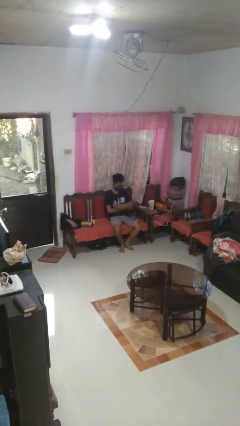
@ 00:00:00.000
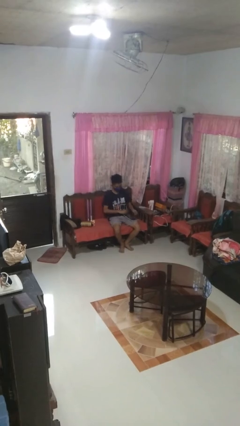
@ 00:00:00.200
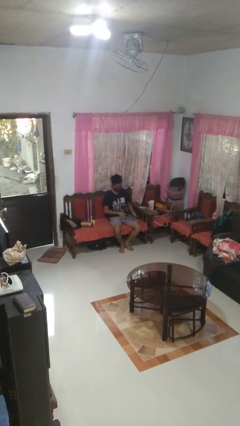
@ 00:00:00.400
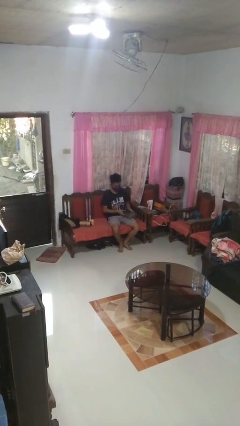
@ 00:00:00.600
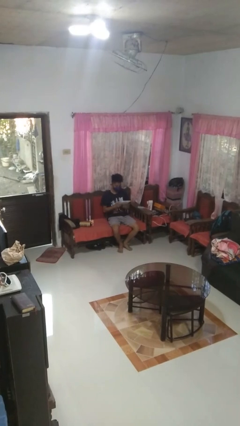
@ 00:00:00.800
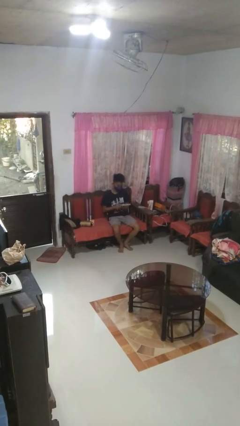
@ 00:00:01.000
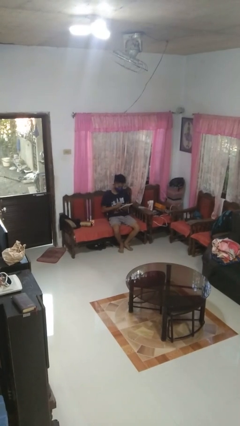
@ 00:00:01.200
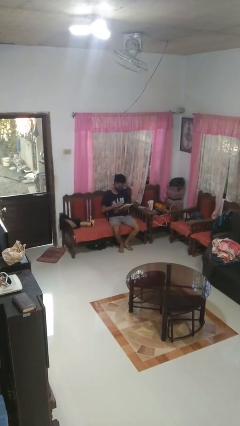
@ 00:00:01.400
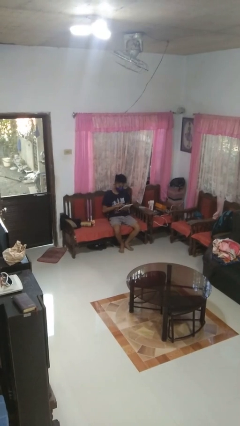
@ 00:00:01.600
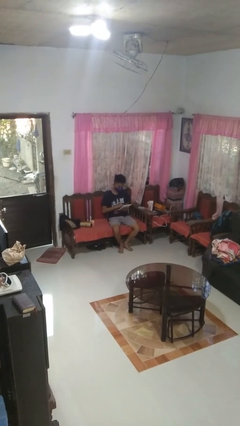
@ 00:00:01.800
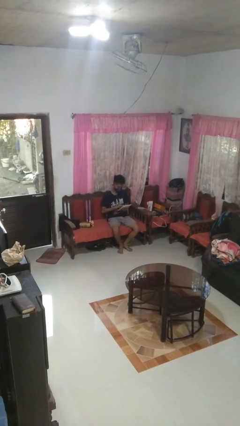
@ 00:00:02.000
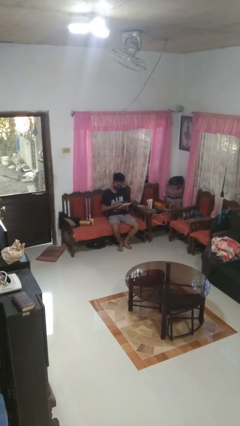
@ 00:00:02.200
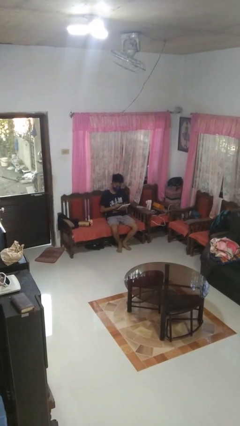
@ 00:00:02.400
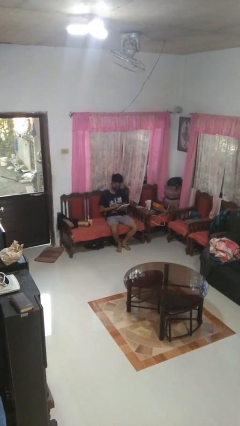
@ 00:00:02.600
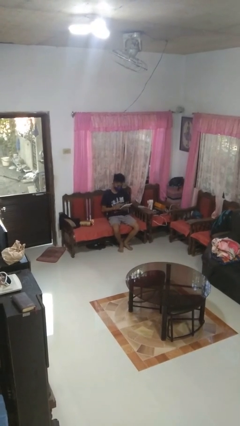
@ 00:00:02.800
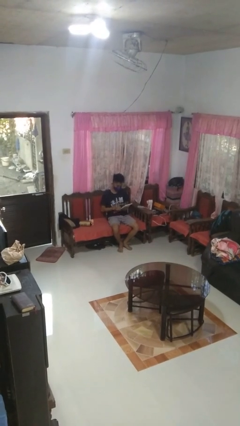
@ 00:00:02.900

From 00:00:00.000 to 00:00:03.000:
person interacts with tablet

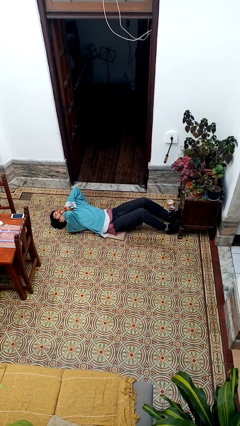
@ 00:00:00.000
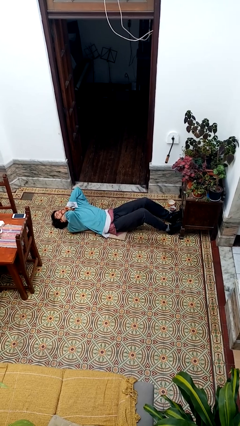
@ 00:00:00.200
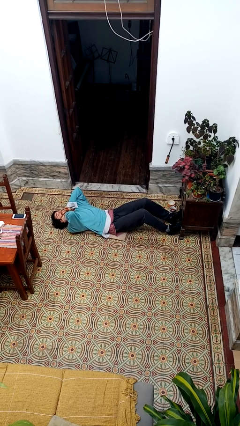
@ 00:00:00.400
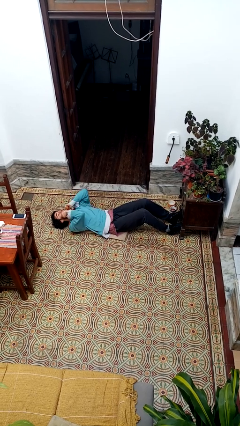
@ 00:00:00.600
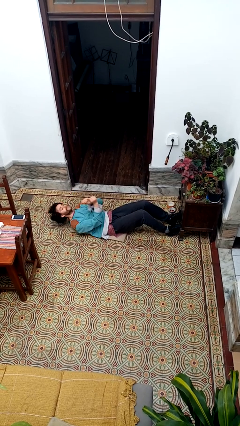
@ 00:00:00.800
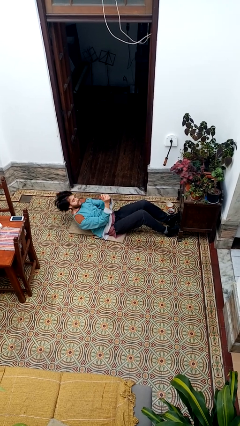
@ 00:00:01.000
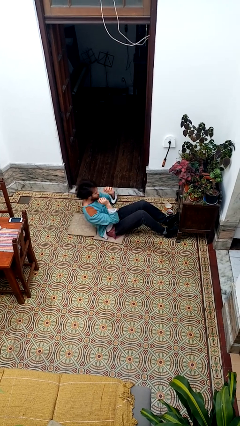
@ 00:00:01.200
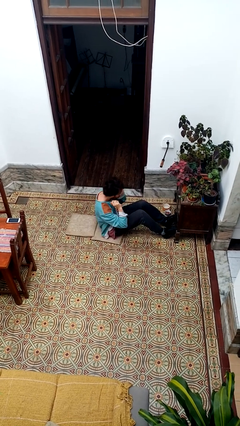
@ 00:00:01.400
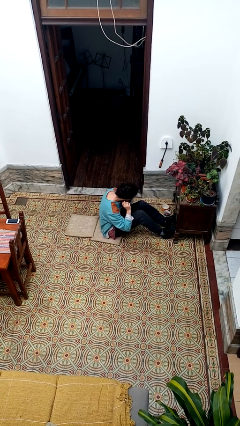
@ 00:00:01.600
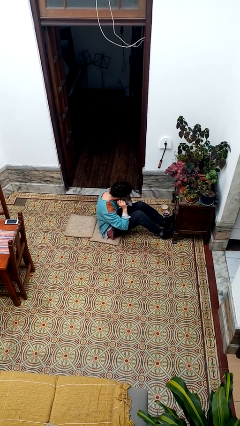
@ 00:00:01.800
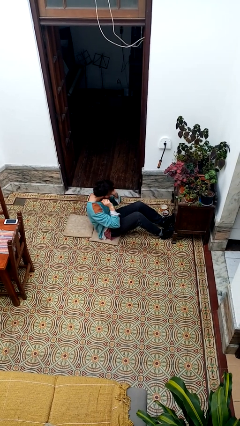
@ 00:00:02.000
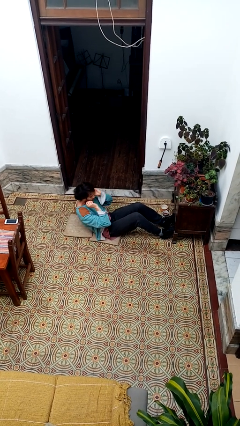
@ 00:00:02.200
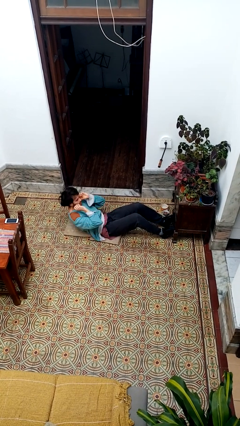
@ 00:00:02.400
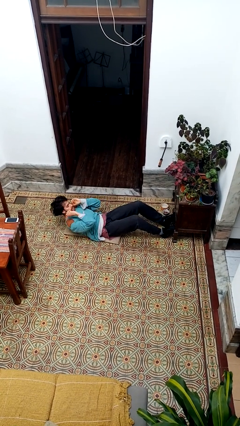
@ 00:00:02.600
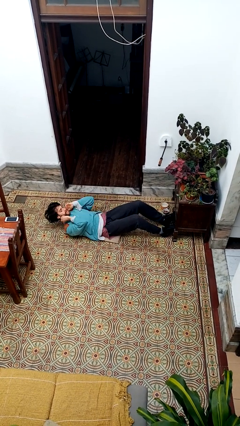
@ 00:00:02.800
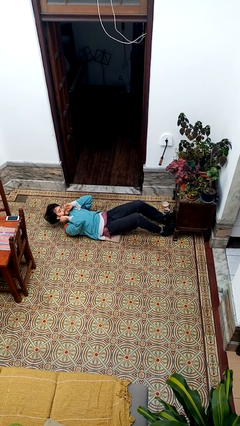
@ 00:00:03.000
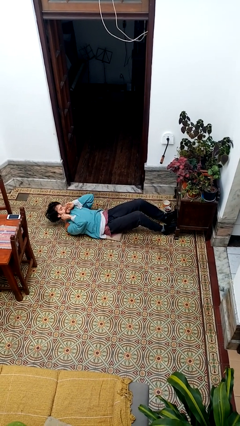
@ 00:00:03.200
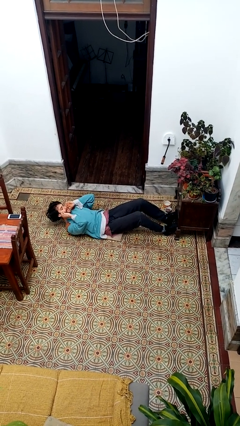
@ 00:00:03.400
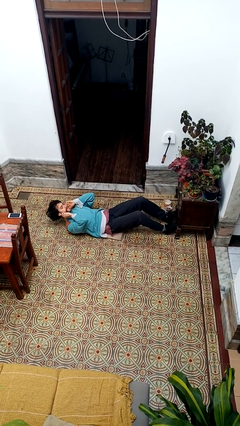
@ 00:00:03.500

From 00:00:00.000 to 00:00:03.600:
person exercises with situp

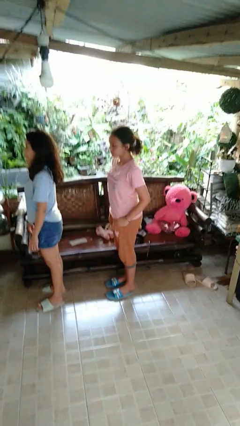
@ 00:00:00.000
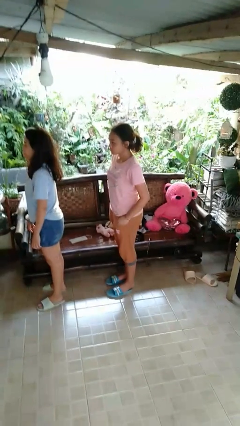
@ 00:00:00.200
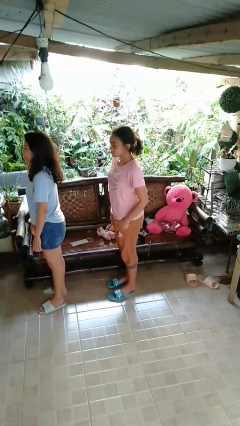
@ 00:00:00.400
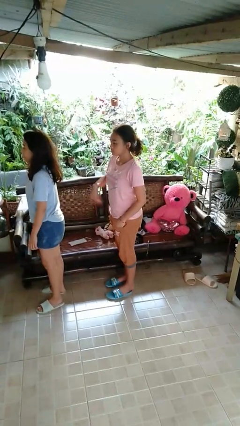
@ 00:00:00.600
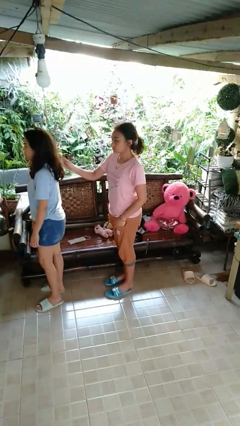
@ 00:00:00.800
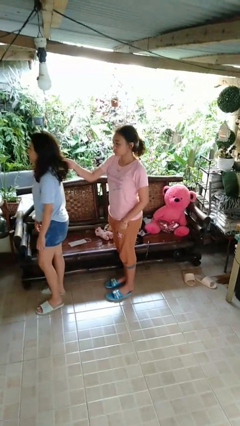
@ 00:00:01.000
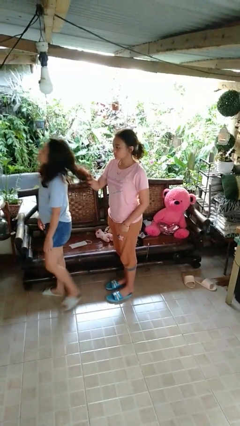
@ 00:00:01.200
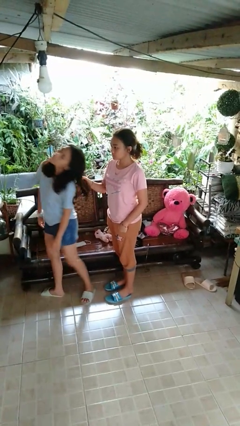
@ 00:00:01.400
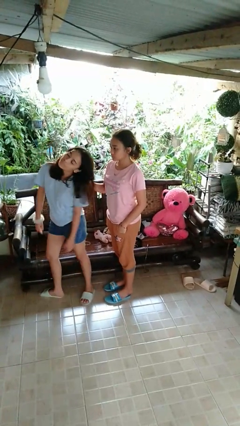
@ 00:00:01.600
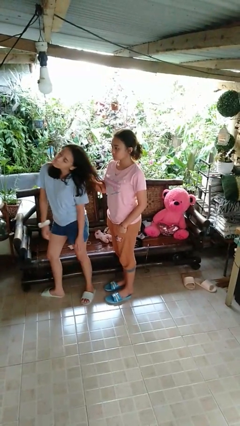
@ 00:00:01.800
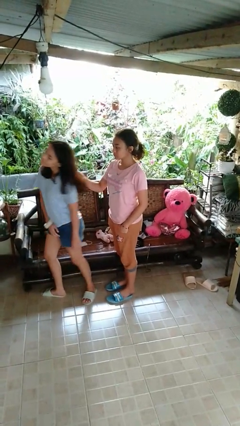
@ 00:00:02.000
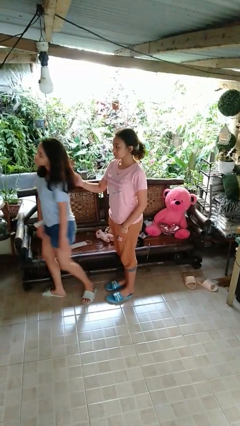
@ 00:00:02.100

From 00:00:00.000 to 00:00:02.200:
person grabs person by hair

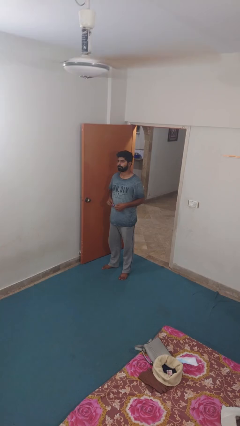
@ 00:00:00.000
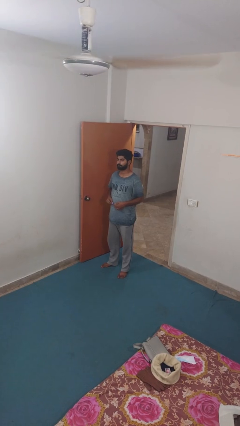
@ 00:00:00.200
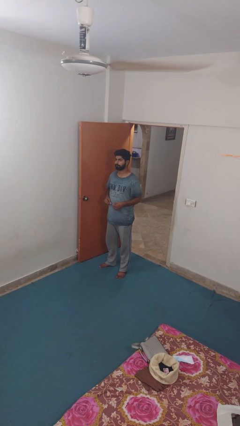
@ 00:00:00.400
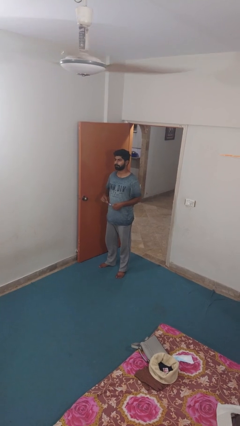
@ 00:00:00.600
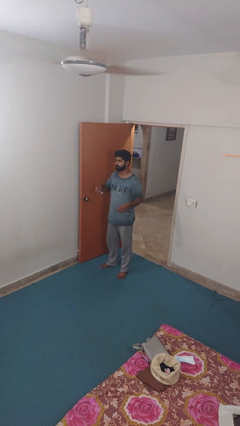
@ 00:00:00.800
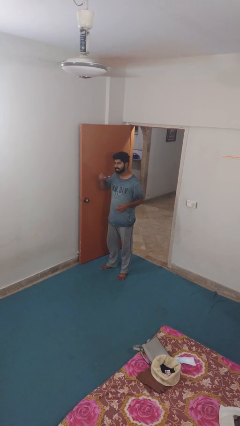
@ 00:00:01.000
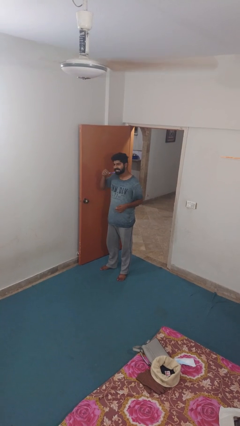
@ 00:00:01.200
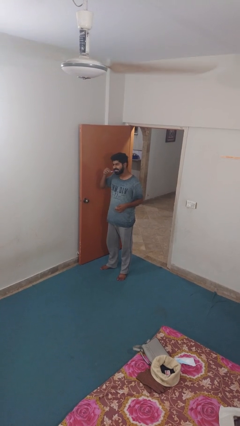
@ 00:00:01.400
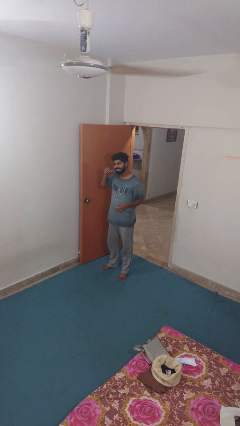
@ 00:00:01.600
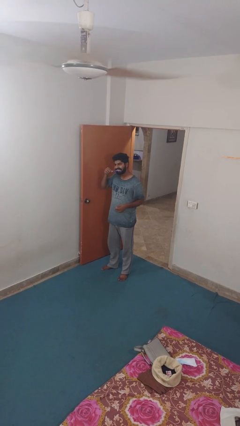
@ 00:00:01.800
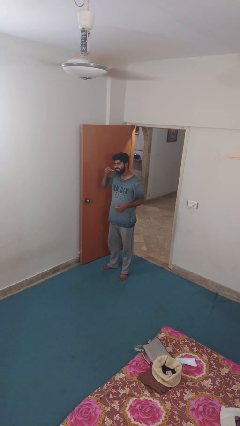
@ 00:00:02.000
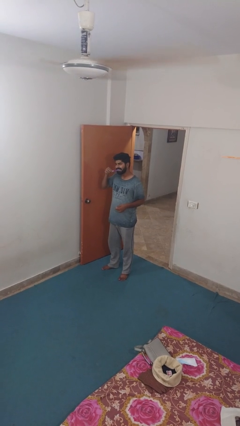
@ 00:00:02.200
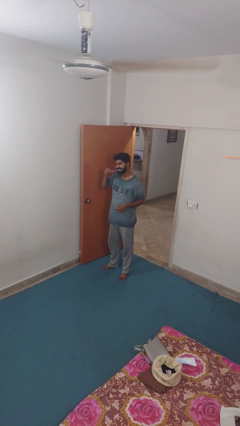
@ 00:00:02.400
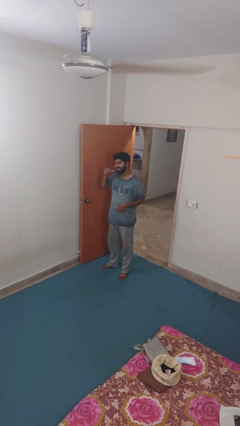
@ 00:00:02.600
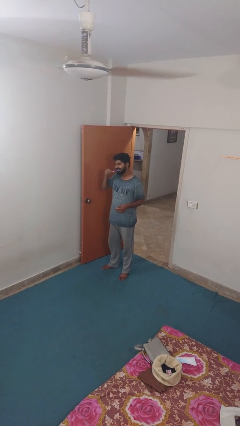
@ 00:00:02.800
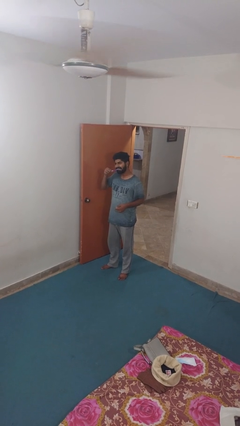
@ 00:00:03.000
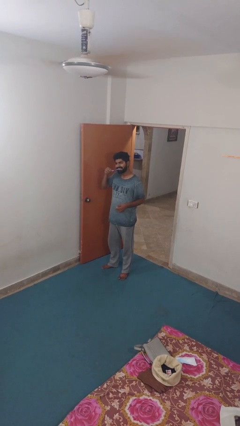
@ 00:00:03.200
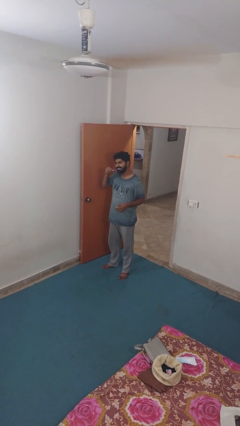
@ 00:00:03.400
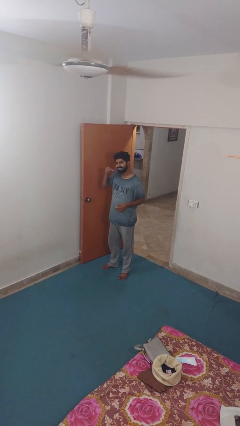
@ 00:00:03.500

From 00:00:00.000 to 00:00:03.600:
person brushes teeth

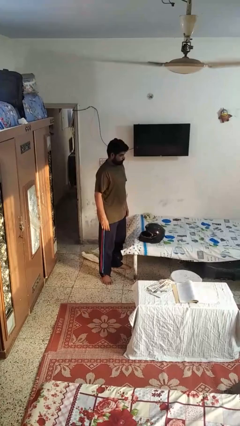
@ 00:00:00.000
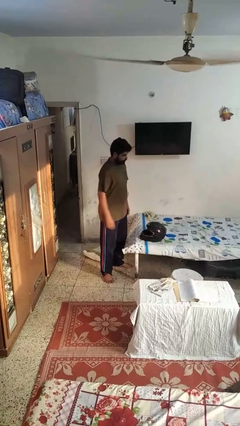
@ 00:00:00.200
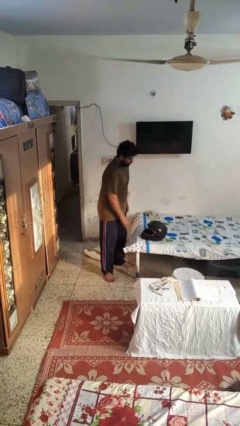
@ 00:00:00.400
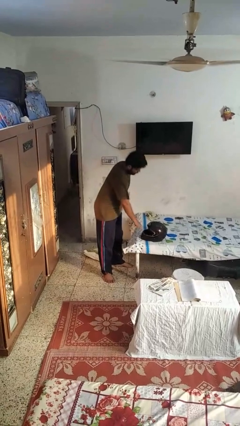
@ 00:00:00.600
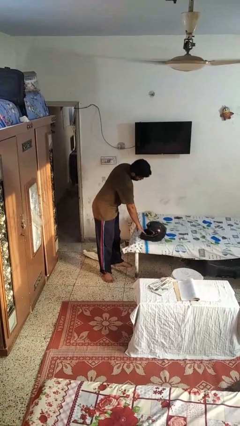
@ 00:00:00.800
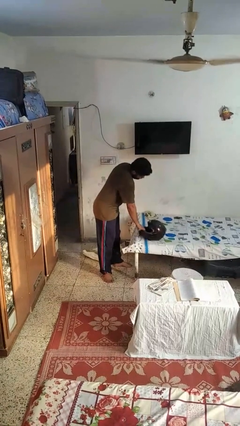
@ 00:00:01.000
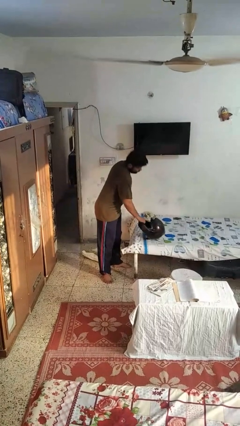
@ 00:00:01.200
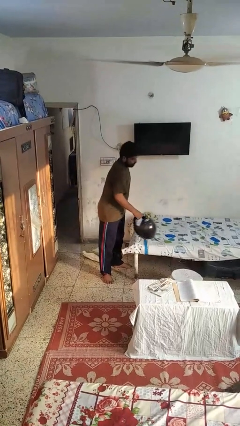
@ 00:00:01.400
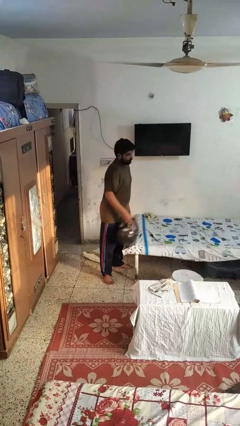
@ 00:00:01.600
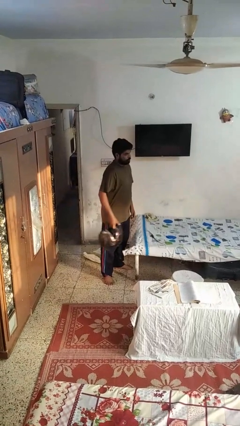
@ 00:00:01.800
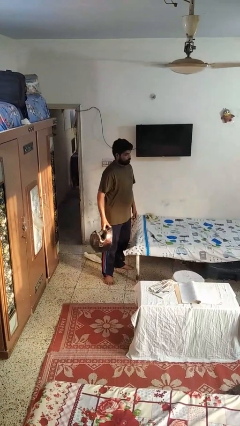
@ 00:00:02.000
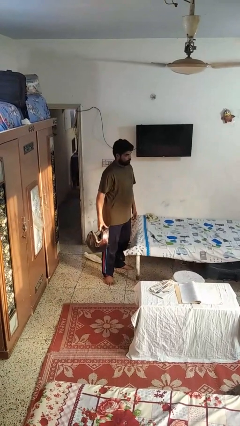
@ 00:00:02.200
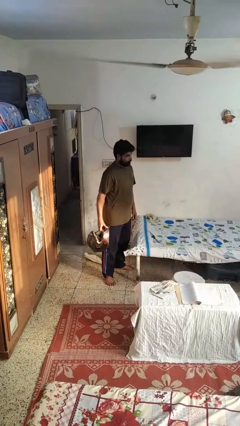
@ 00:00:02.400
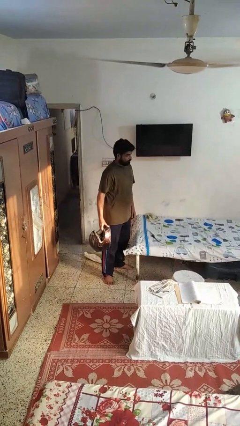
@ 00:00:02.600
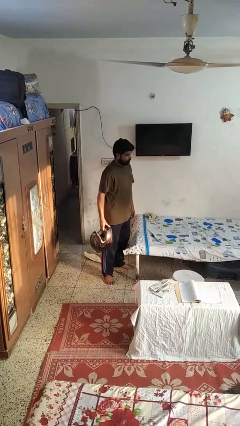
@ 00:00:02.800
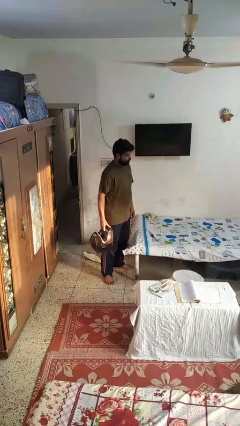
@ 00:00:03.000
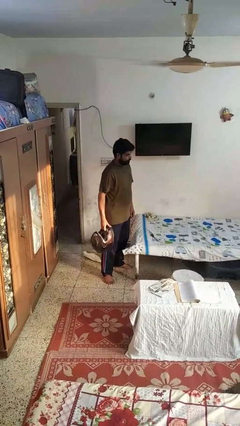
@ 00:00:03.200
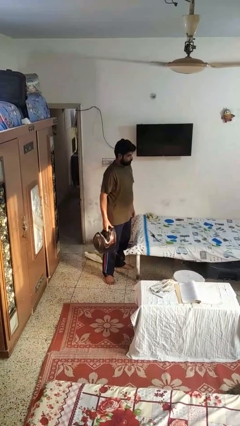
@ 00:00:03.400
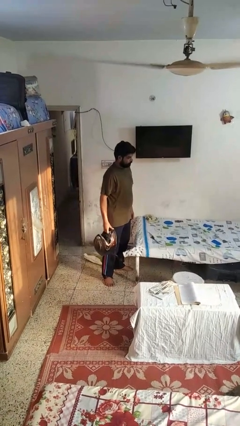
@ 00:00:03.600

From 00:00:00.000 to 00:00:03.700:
person picks up object from bed

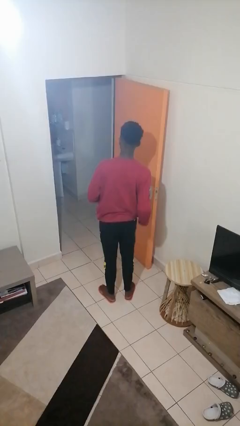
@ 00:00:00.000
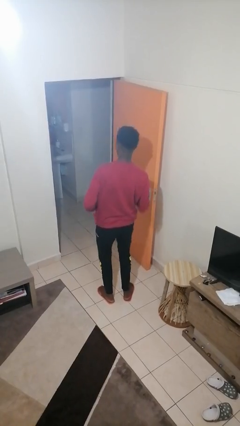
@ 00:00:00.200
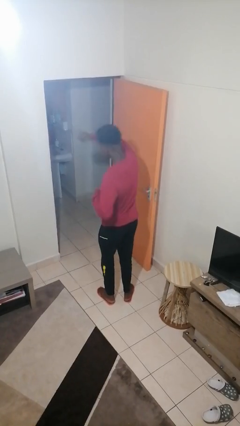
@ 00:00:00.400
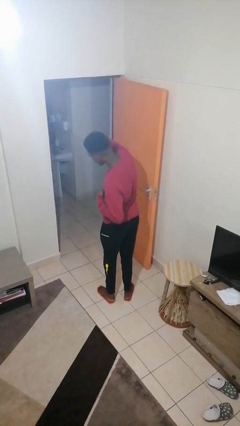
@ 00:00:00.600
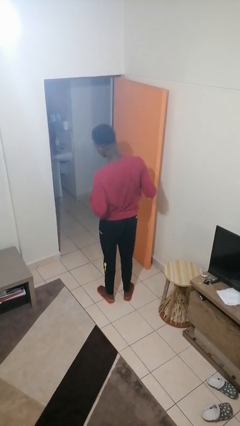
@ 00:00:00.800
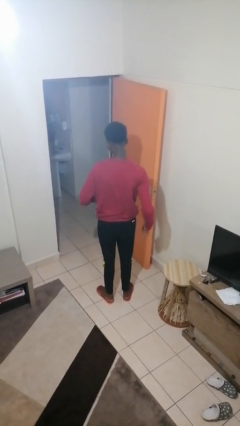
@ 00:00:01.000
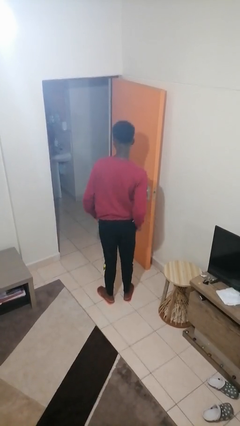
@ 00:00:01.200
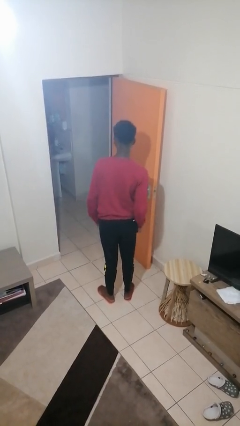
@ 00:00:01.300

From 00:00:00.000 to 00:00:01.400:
person punches
